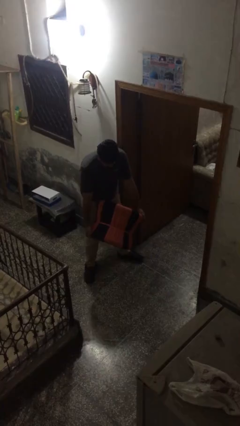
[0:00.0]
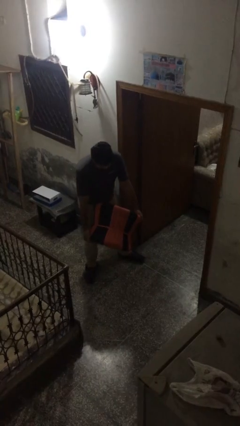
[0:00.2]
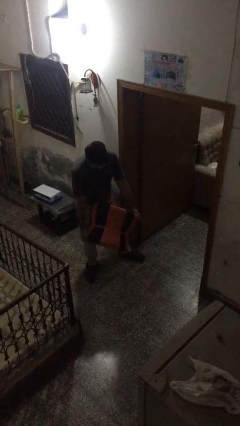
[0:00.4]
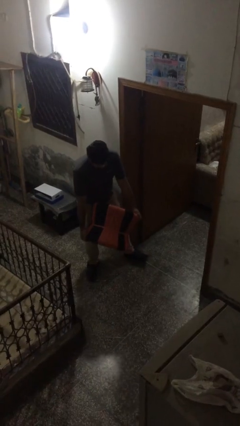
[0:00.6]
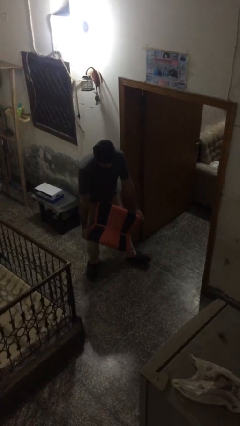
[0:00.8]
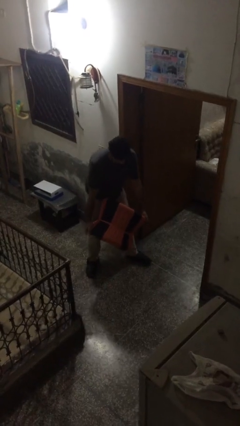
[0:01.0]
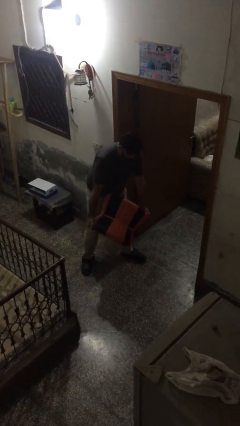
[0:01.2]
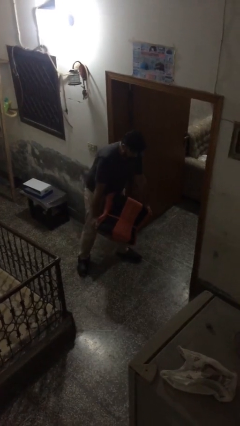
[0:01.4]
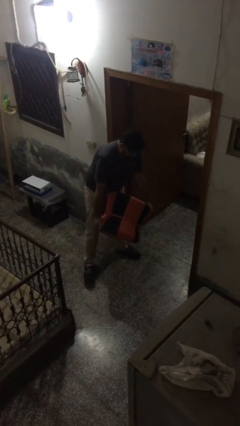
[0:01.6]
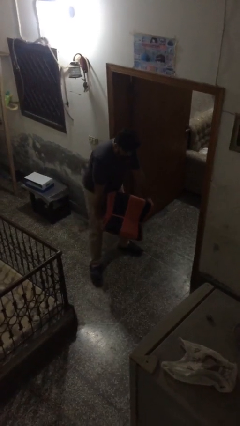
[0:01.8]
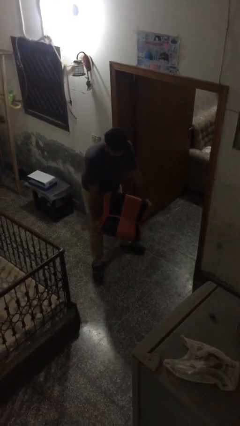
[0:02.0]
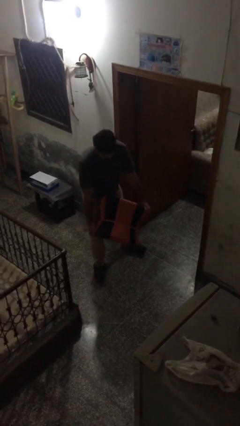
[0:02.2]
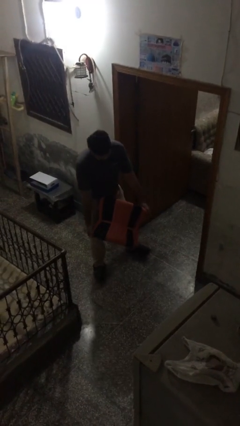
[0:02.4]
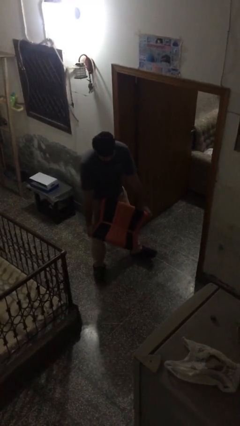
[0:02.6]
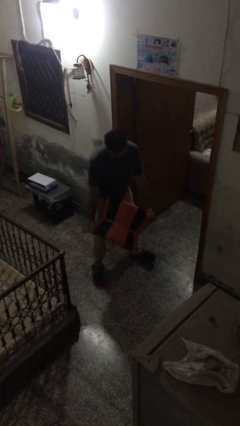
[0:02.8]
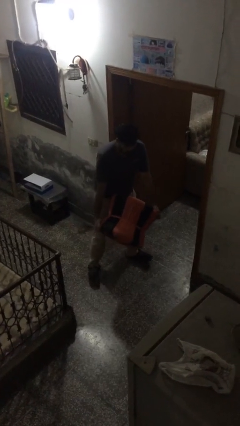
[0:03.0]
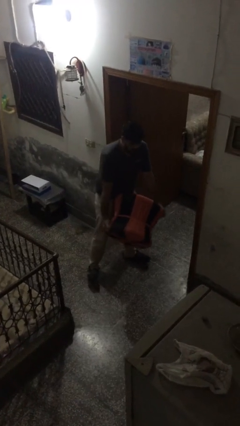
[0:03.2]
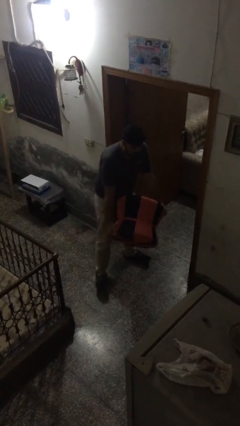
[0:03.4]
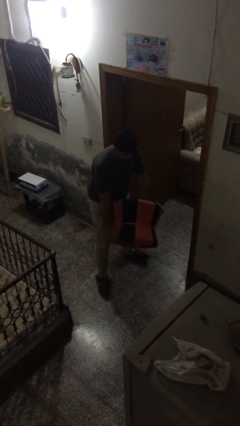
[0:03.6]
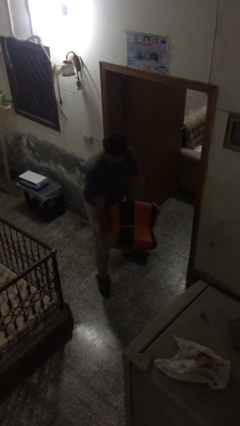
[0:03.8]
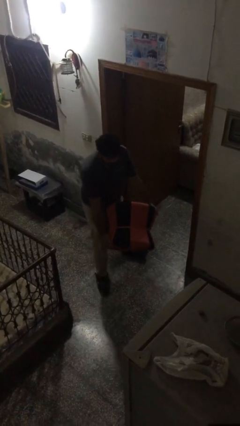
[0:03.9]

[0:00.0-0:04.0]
person carries heavy object

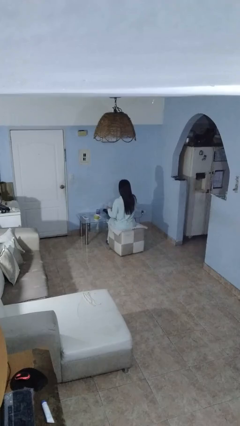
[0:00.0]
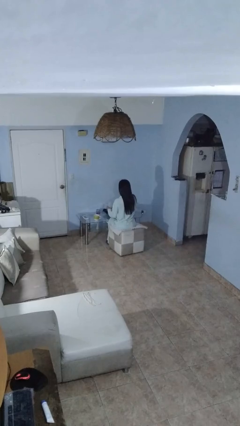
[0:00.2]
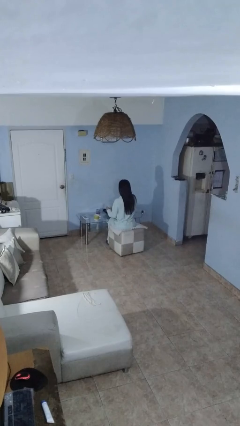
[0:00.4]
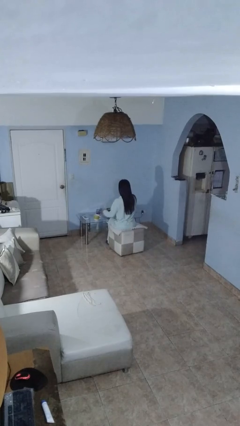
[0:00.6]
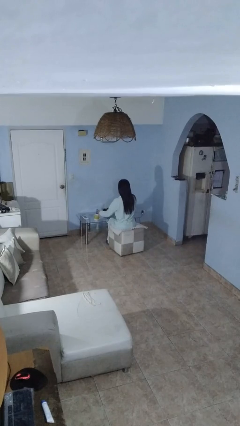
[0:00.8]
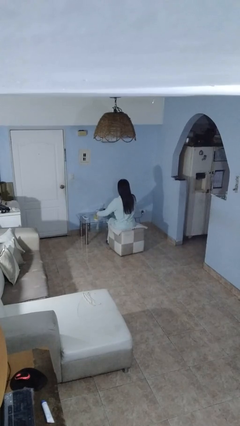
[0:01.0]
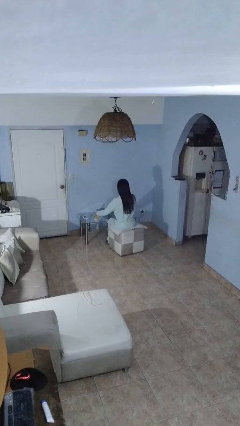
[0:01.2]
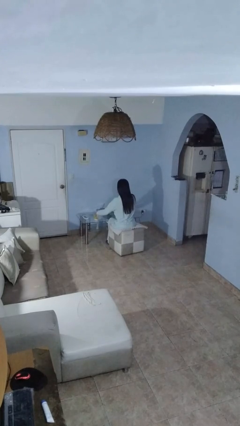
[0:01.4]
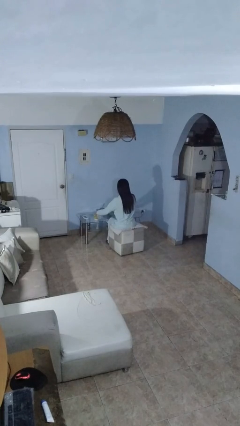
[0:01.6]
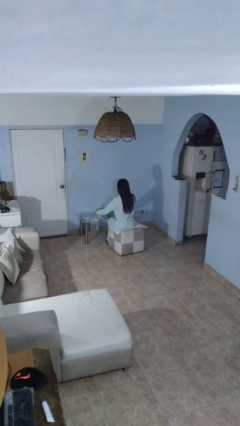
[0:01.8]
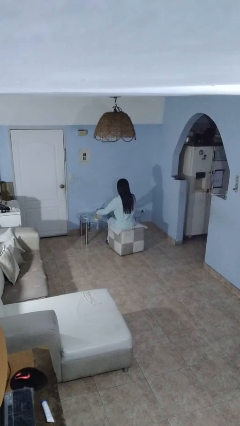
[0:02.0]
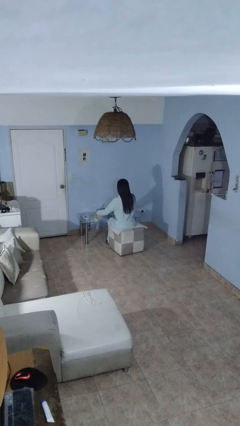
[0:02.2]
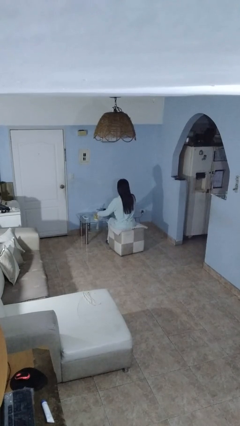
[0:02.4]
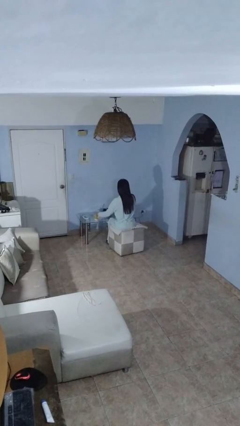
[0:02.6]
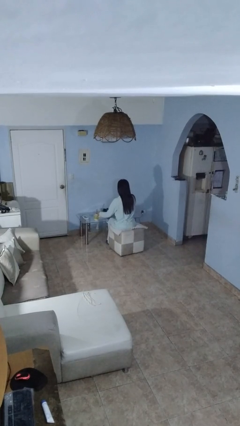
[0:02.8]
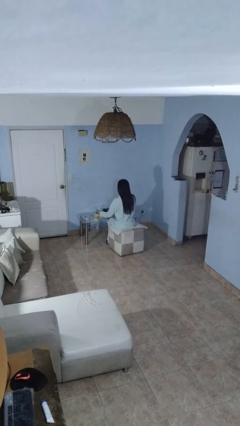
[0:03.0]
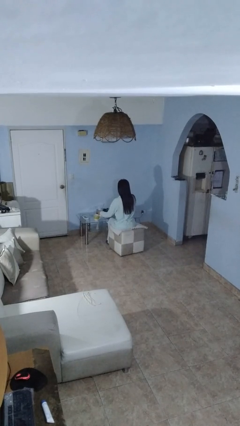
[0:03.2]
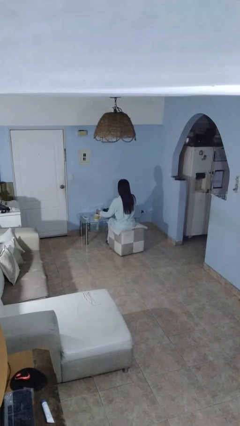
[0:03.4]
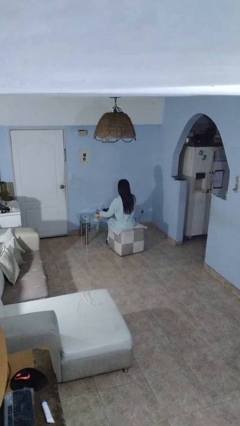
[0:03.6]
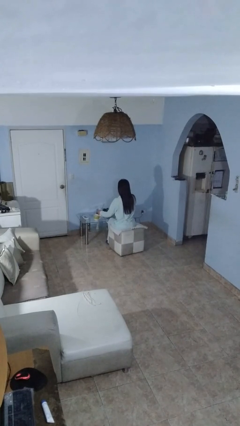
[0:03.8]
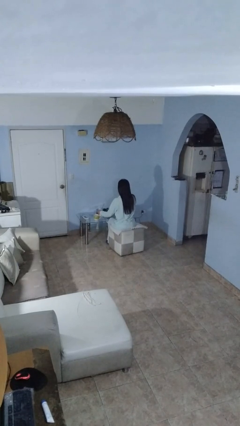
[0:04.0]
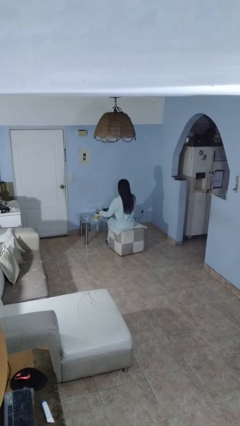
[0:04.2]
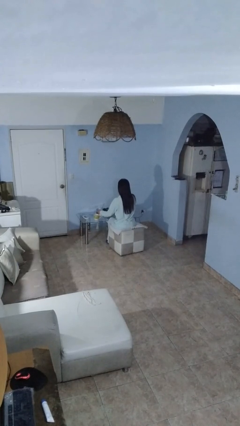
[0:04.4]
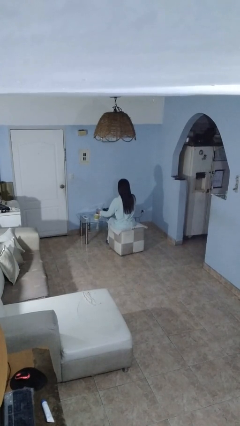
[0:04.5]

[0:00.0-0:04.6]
person pours liquid into cup

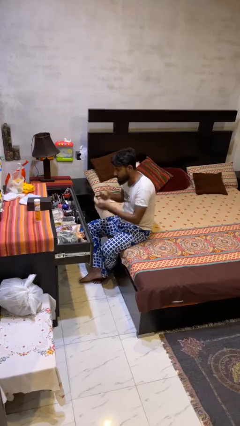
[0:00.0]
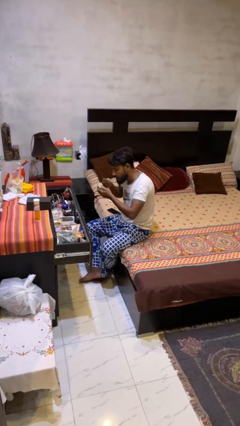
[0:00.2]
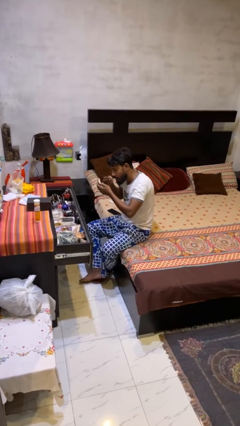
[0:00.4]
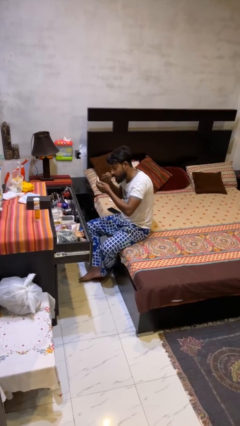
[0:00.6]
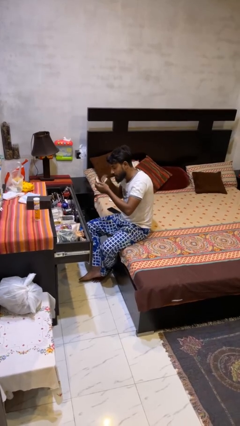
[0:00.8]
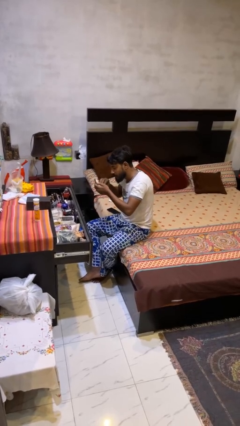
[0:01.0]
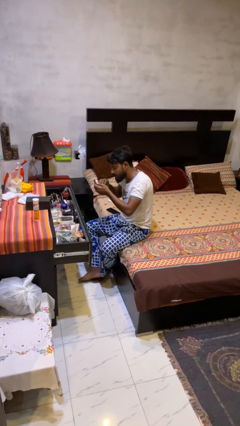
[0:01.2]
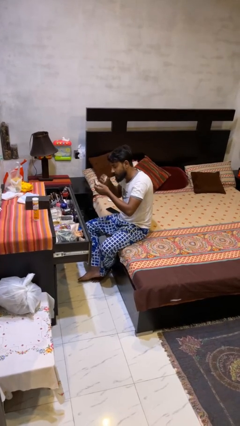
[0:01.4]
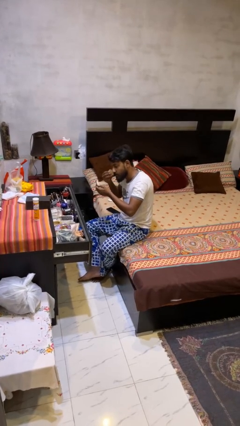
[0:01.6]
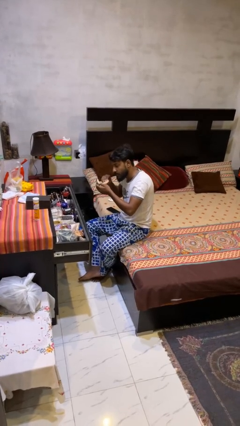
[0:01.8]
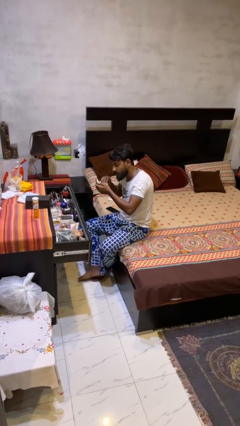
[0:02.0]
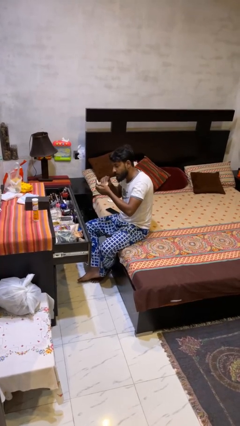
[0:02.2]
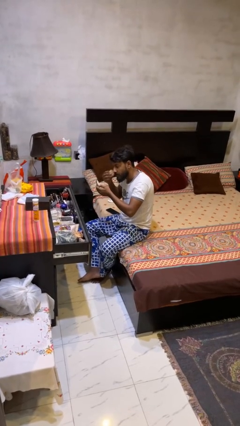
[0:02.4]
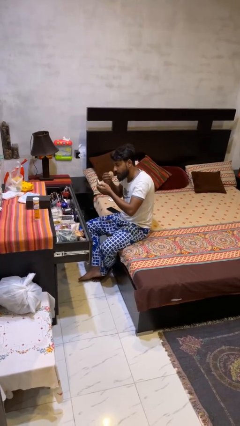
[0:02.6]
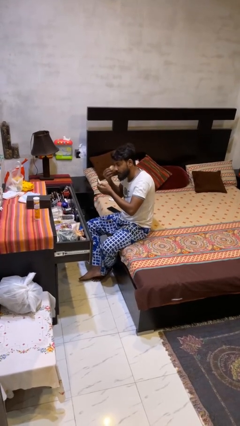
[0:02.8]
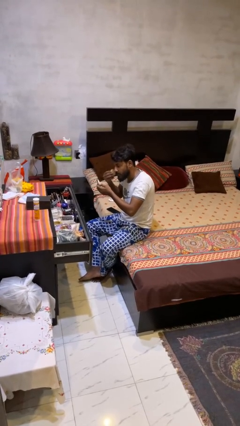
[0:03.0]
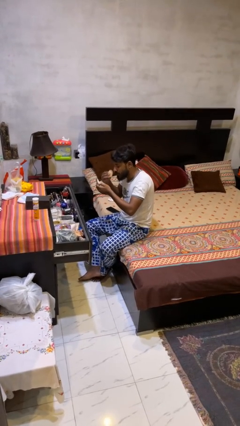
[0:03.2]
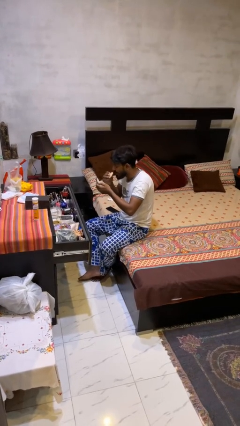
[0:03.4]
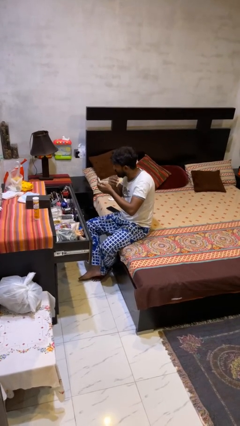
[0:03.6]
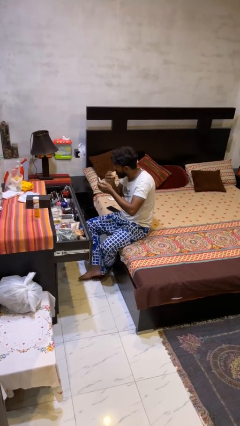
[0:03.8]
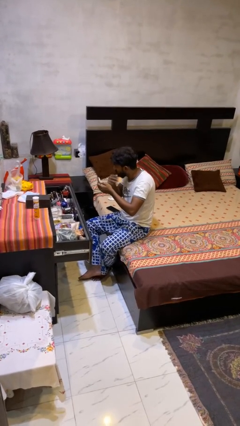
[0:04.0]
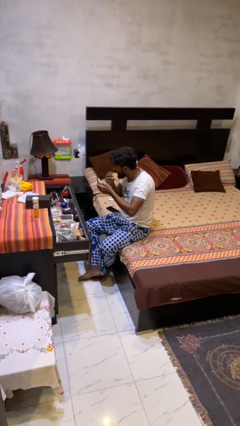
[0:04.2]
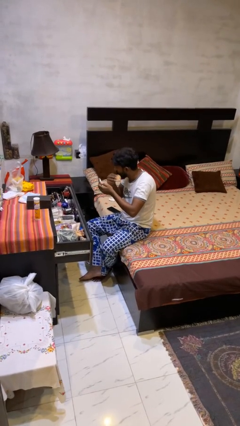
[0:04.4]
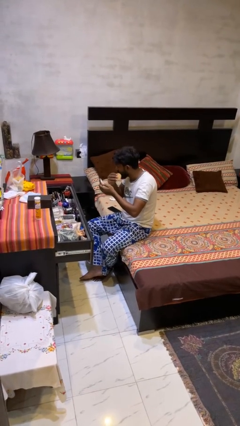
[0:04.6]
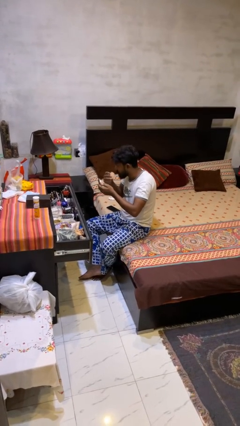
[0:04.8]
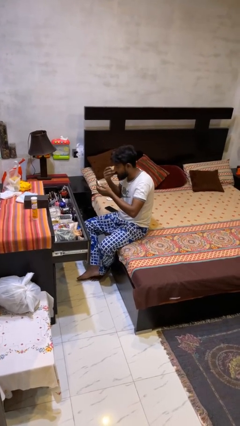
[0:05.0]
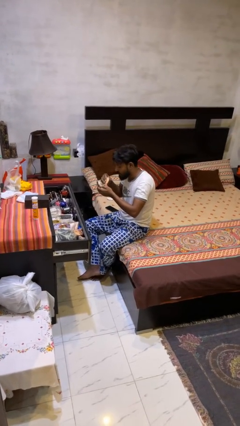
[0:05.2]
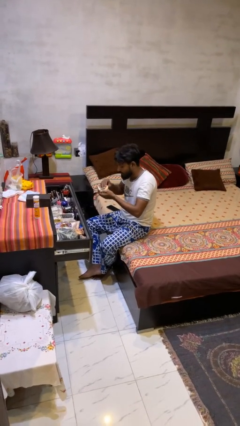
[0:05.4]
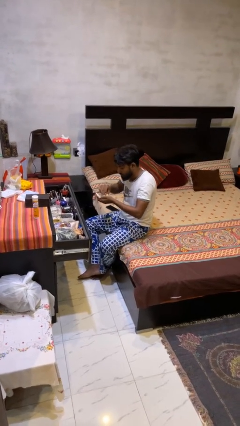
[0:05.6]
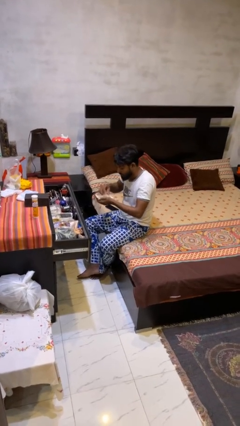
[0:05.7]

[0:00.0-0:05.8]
person applies foundation makeup

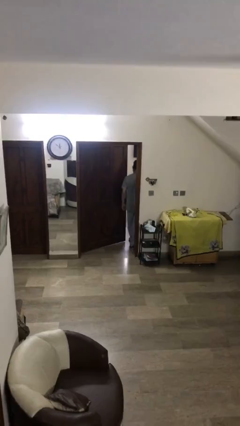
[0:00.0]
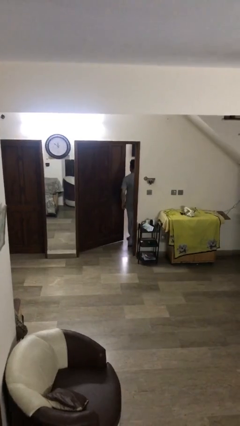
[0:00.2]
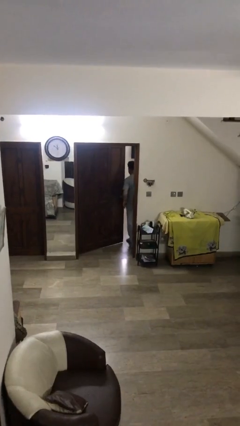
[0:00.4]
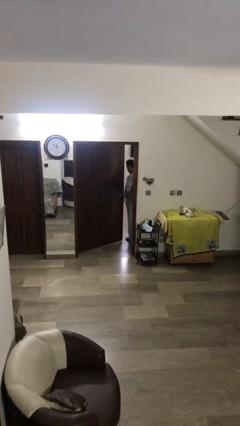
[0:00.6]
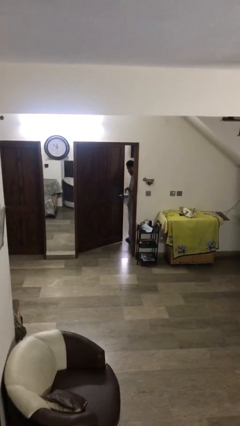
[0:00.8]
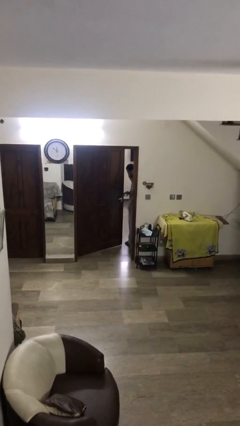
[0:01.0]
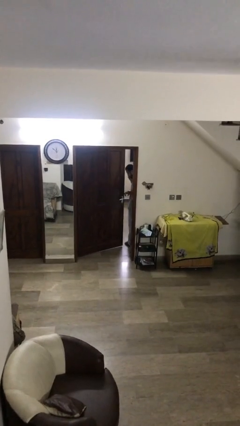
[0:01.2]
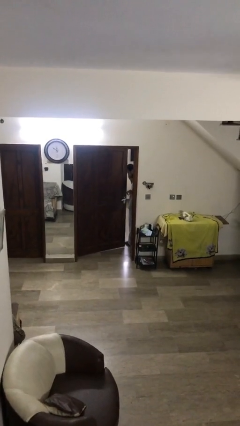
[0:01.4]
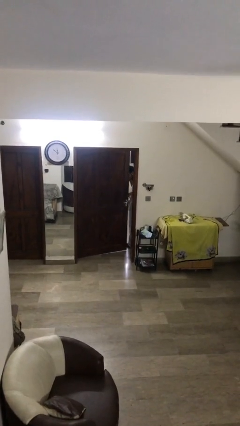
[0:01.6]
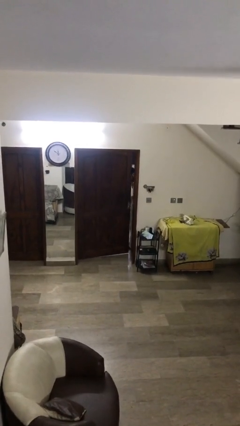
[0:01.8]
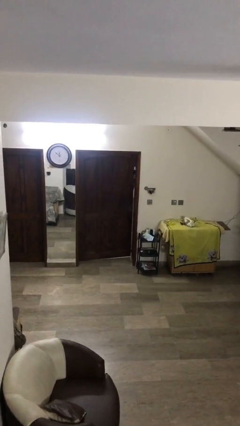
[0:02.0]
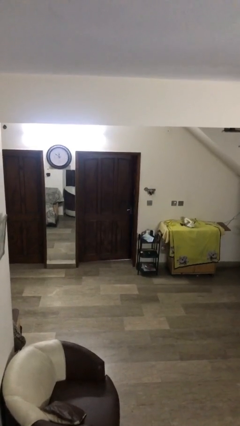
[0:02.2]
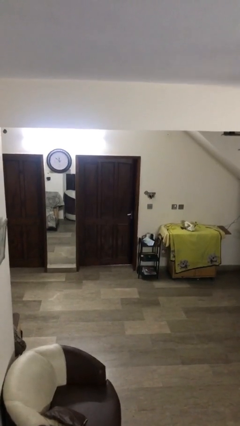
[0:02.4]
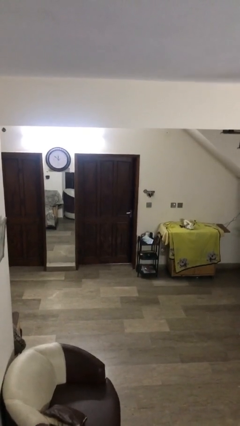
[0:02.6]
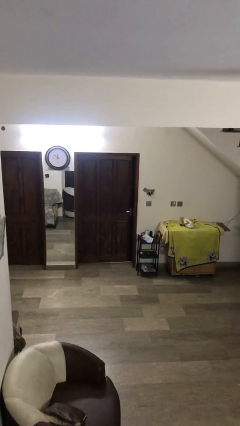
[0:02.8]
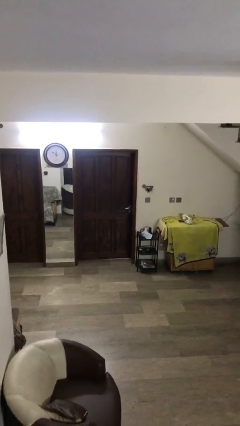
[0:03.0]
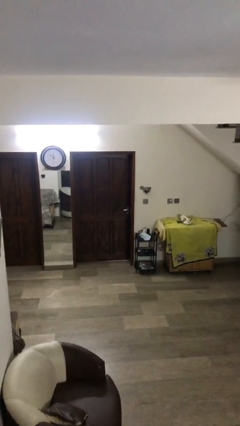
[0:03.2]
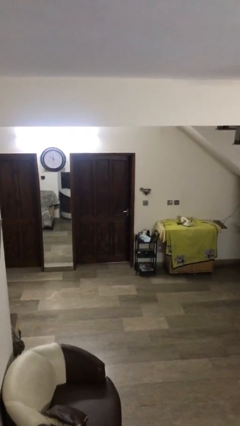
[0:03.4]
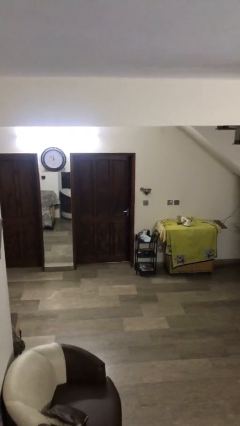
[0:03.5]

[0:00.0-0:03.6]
person closes facility door
